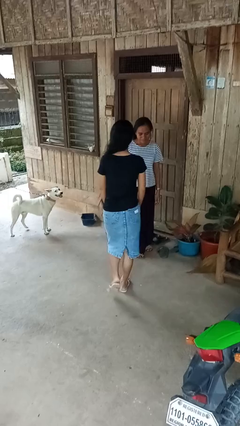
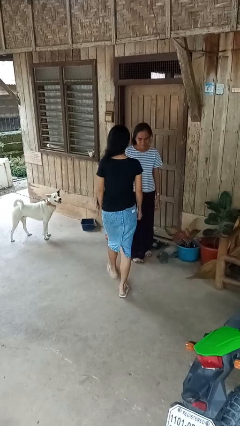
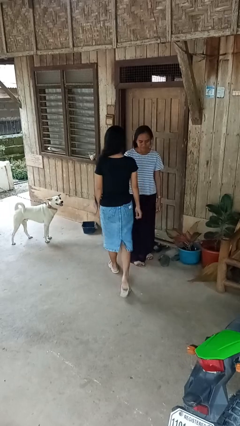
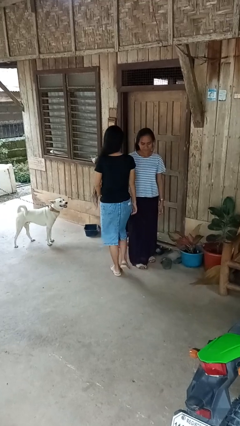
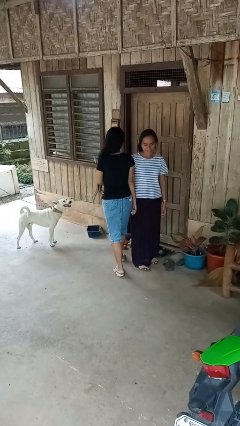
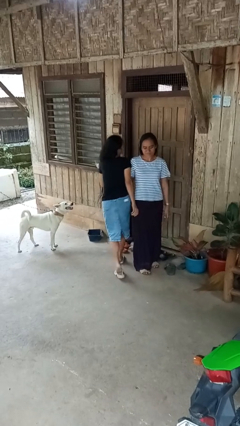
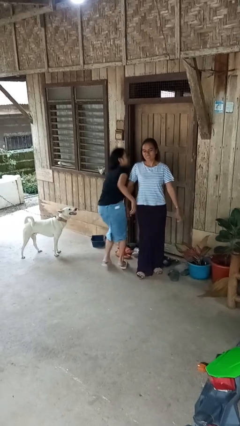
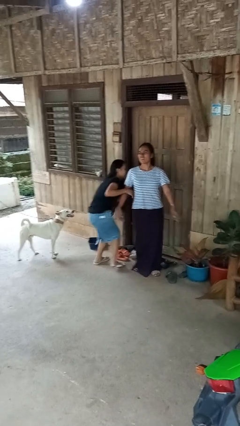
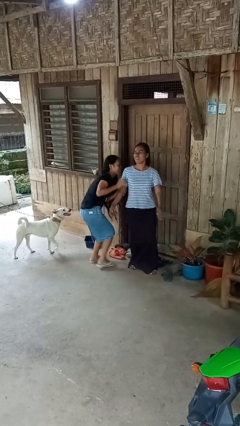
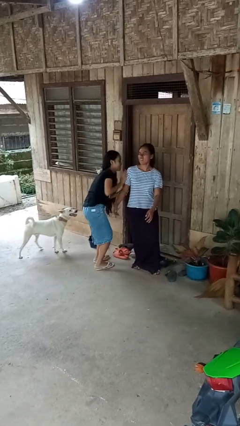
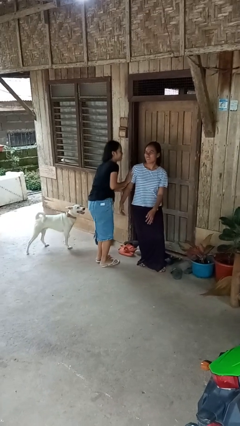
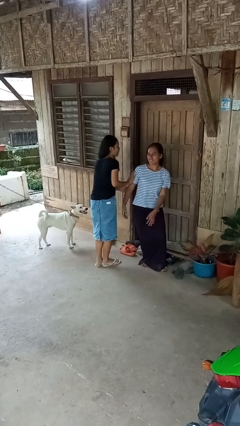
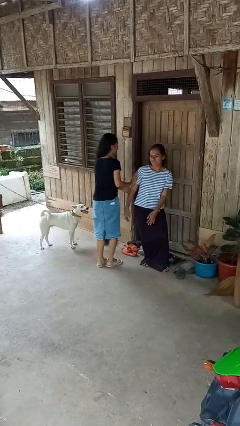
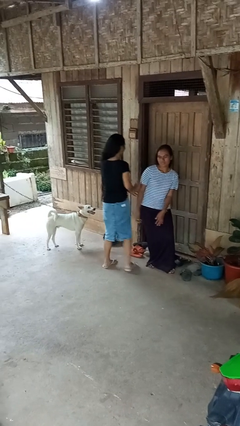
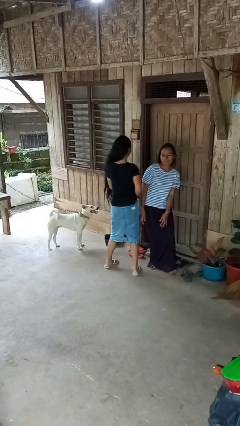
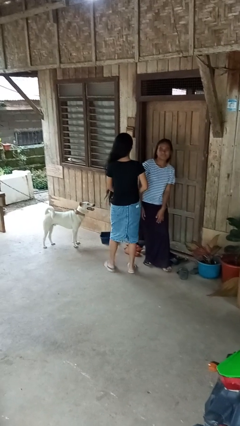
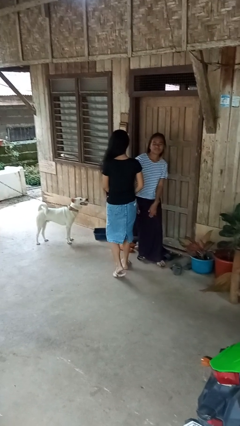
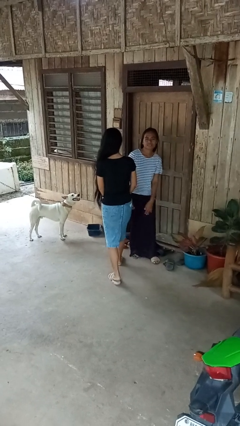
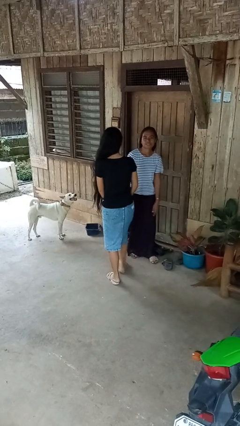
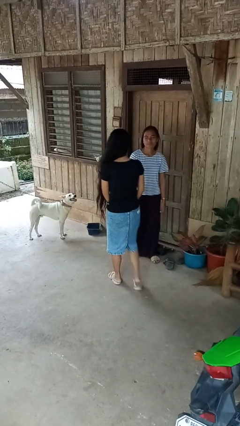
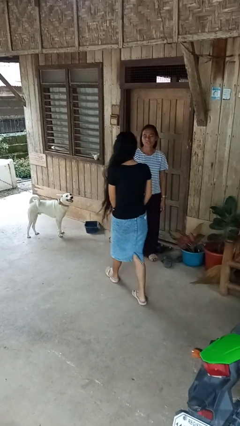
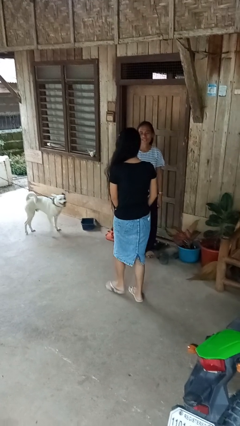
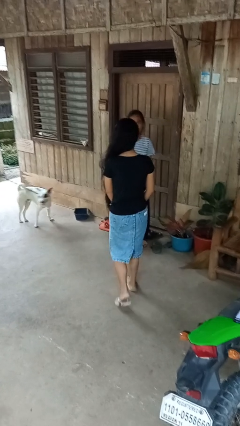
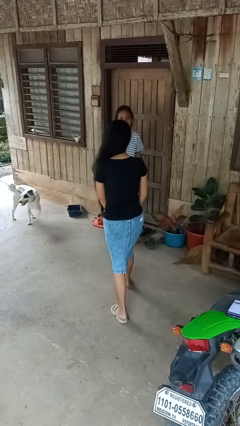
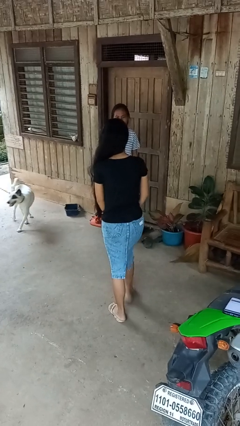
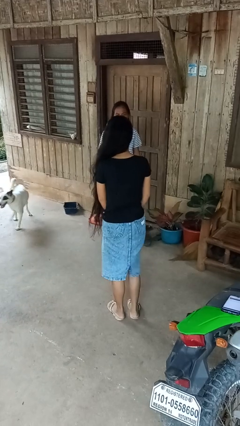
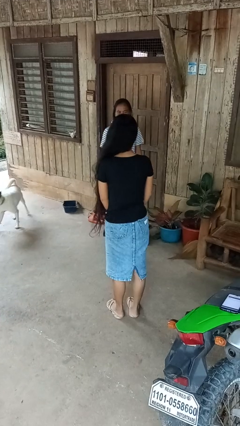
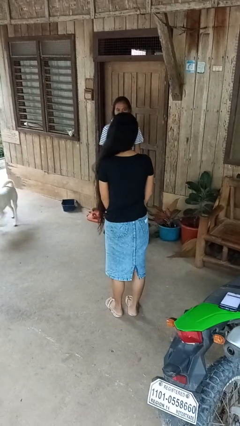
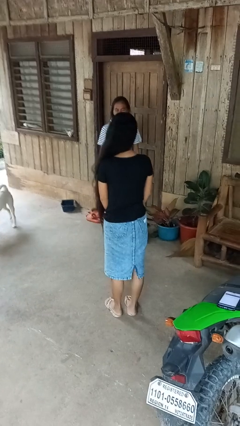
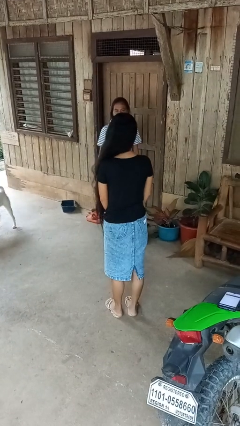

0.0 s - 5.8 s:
person bumps into person

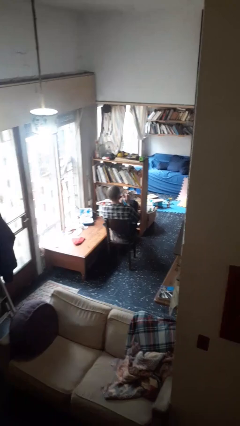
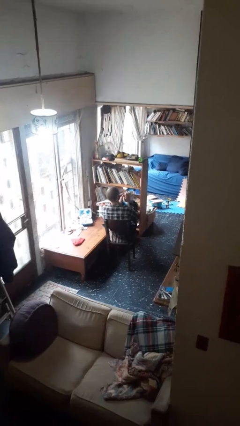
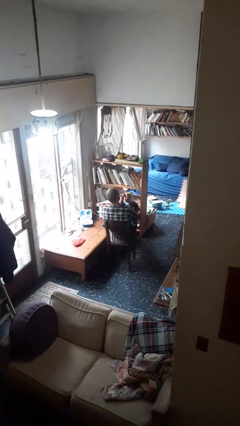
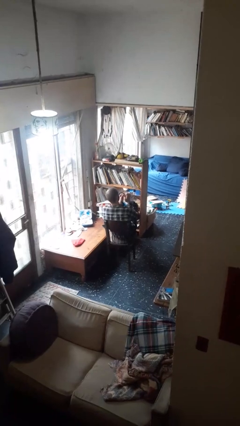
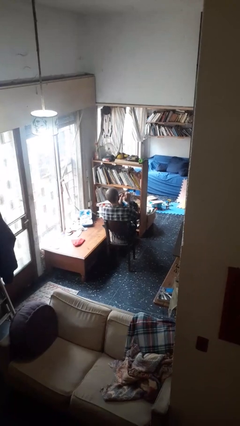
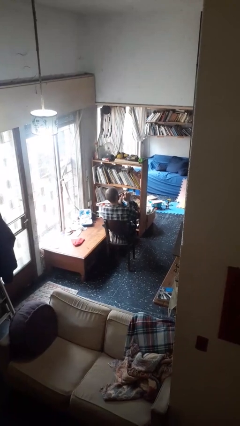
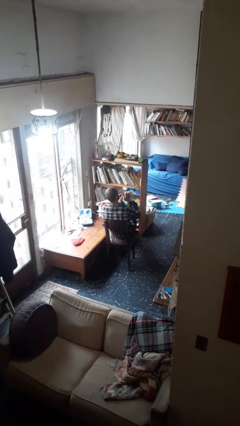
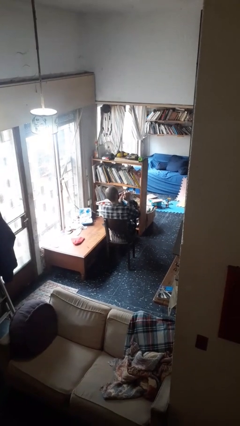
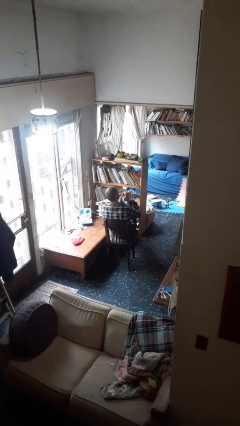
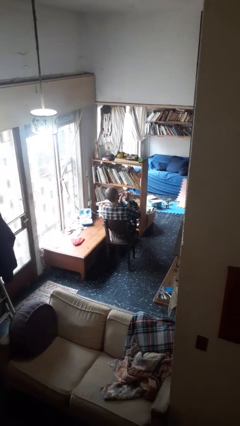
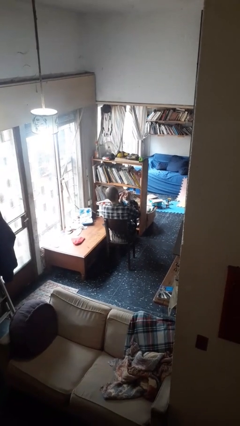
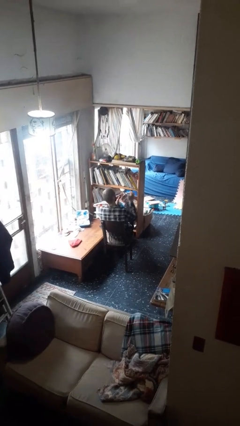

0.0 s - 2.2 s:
person files fingernails

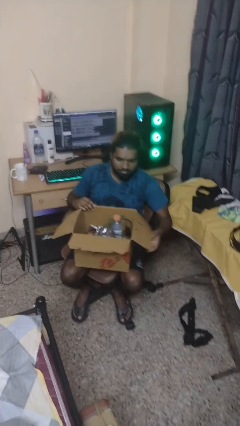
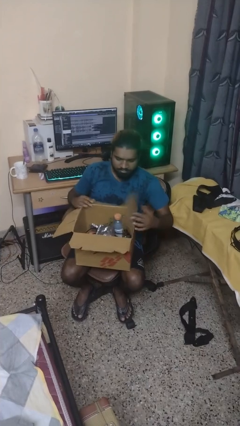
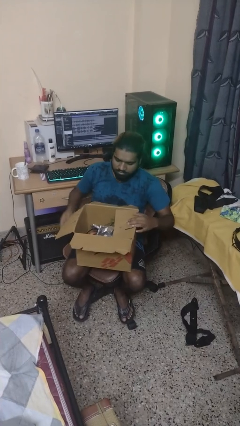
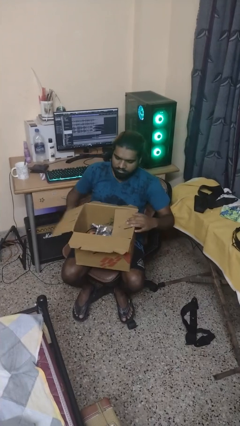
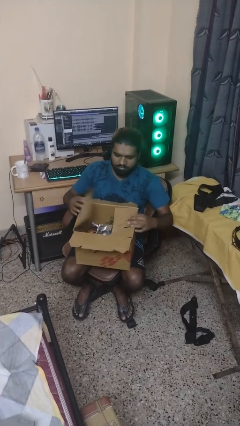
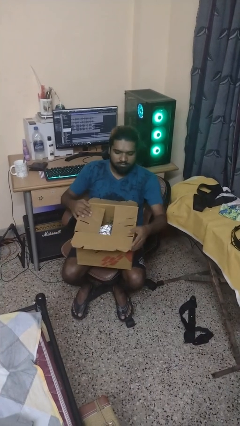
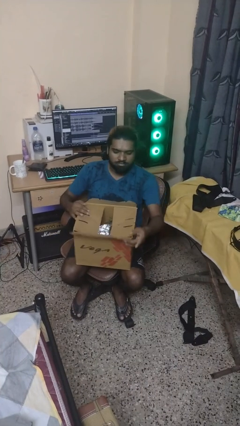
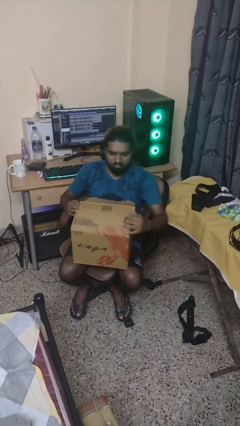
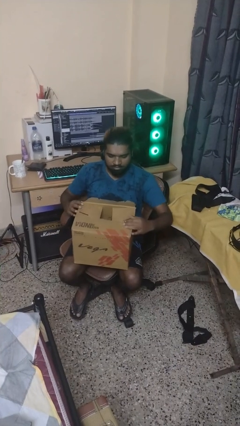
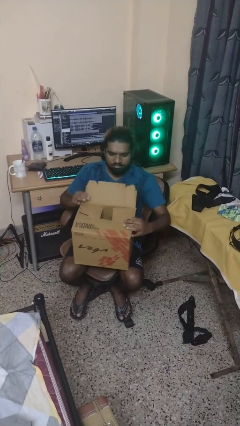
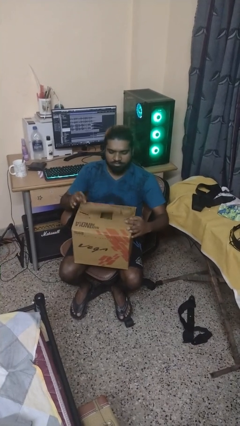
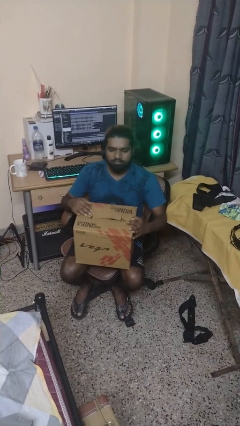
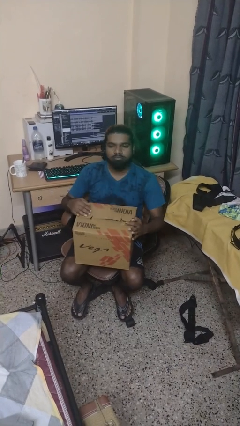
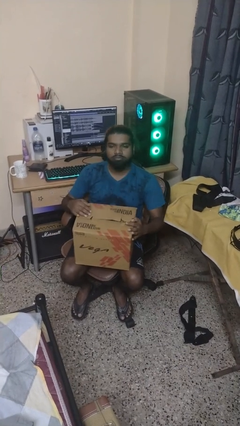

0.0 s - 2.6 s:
person closes box

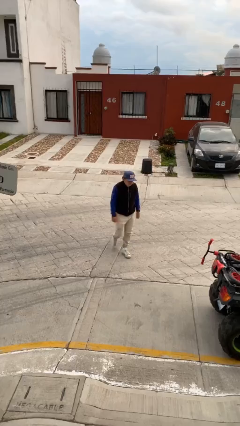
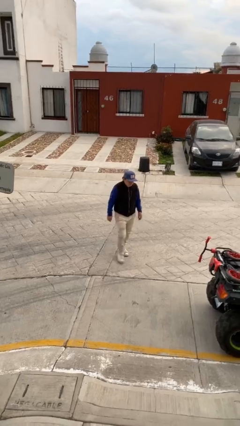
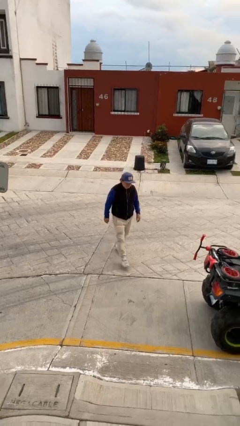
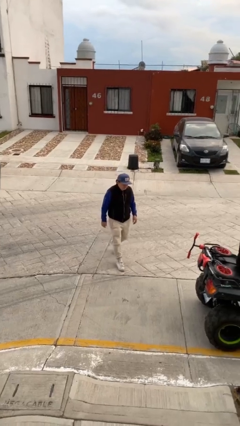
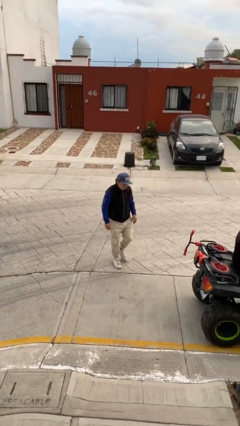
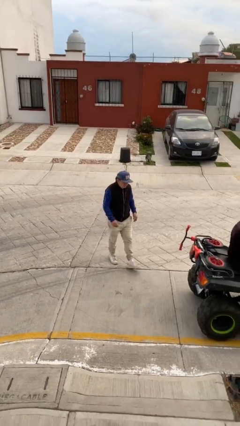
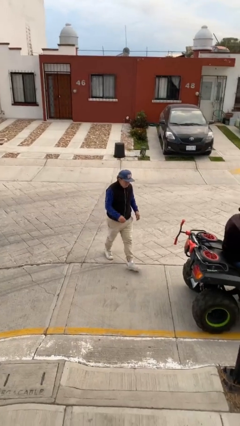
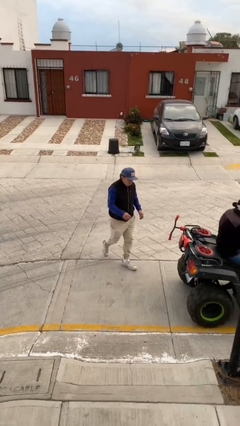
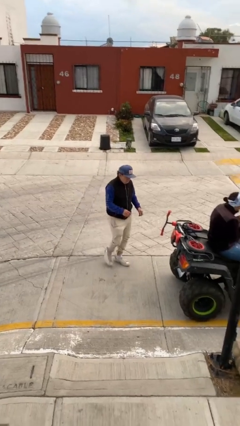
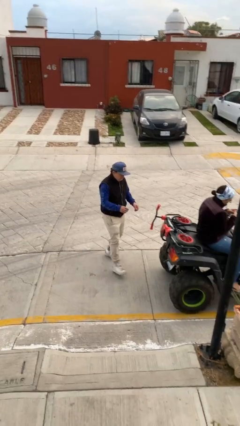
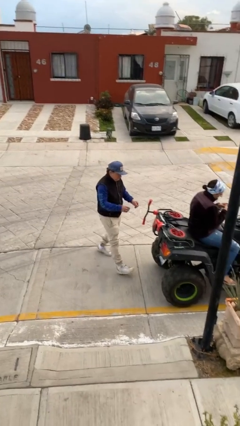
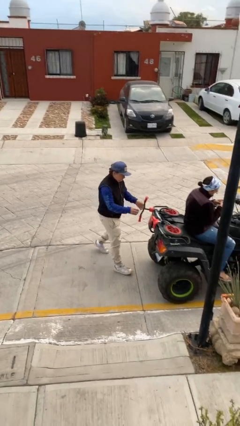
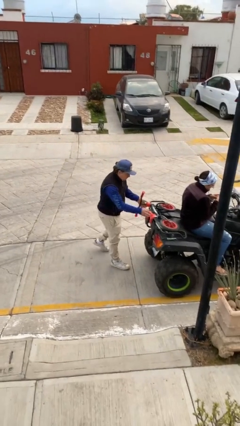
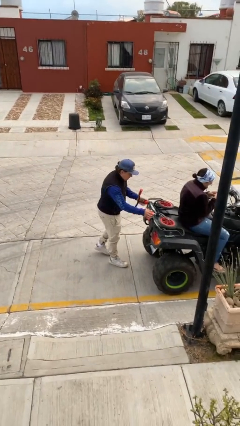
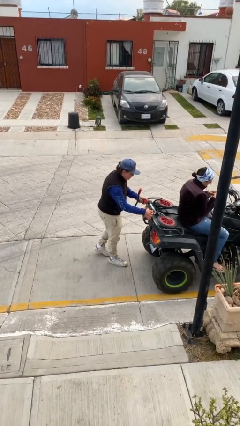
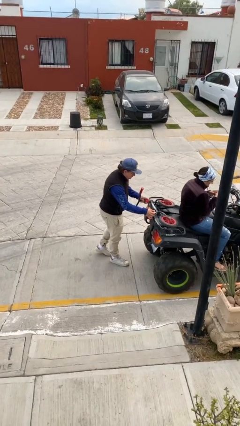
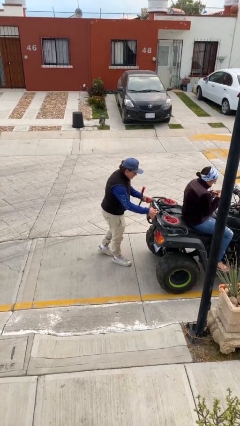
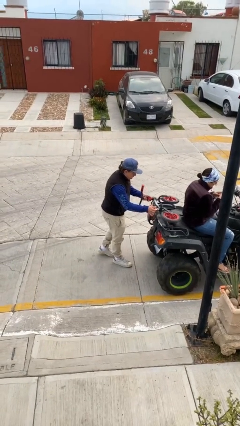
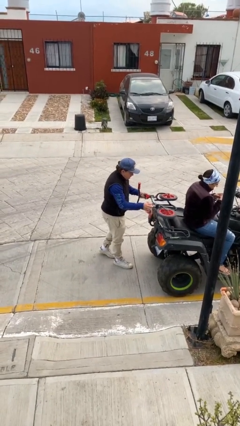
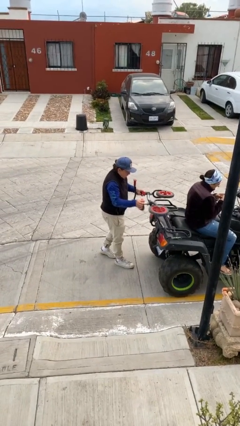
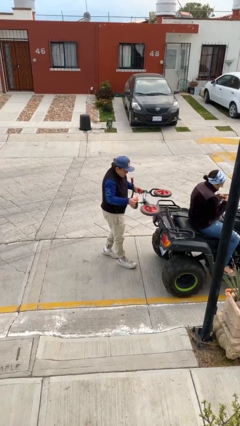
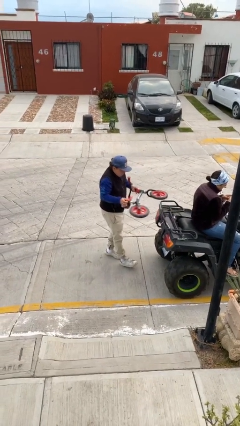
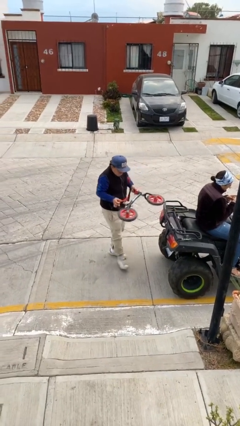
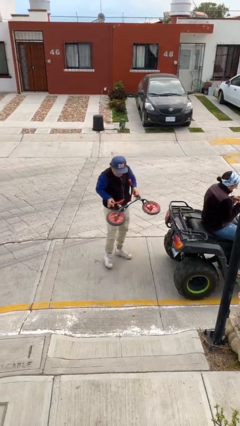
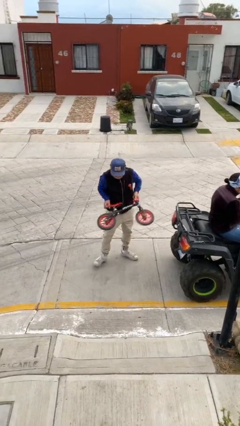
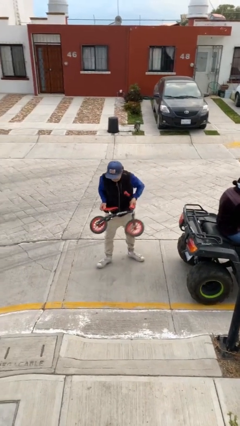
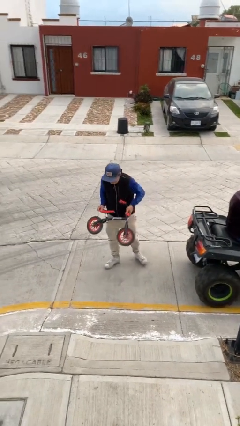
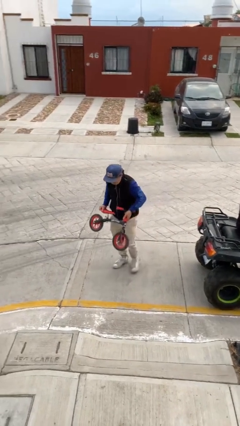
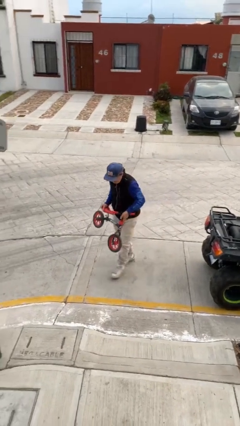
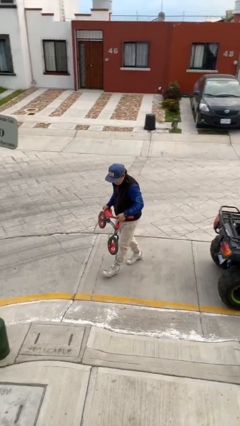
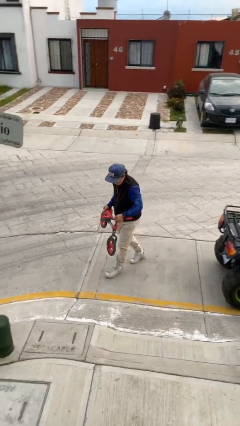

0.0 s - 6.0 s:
person steals object from person

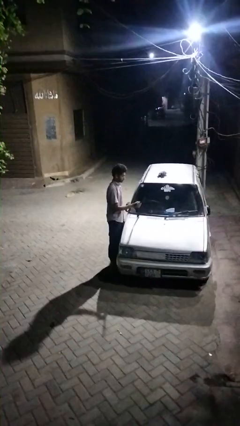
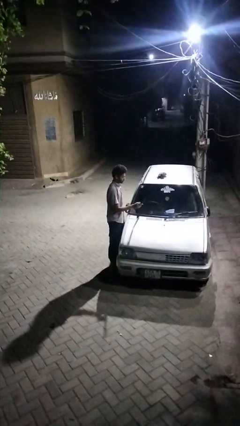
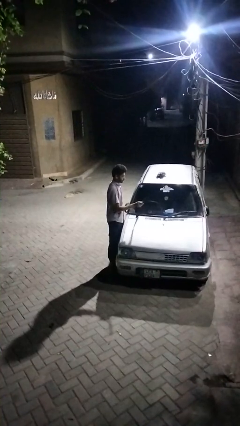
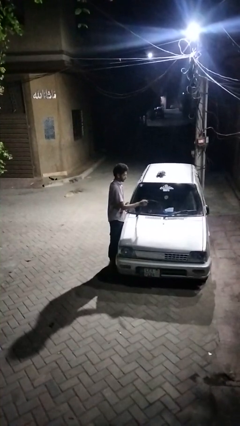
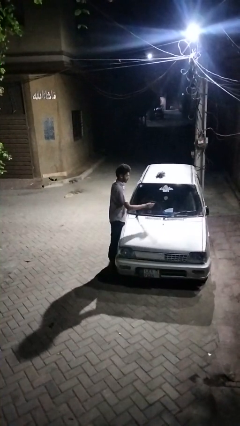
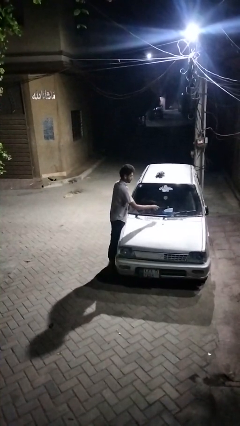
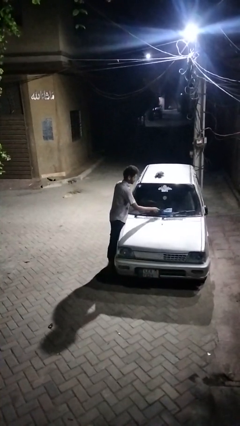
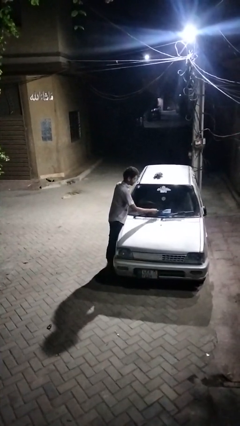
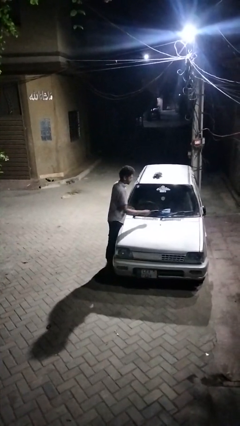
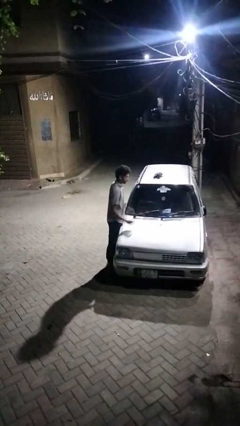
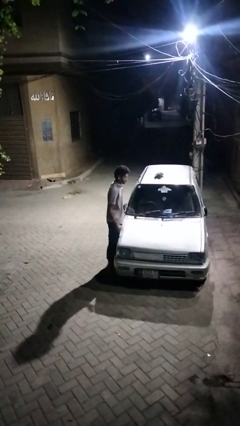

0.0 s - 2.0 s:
person flips down car wipers
